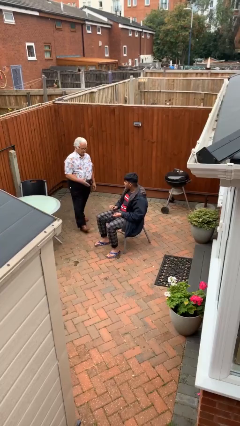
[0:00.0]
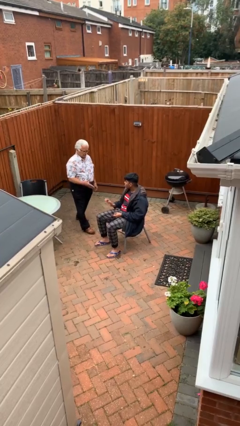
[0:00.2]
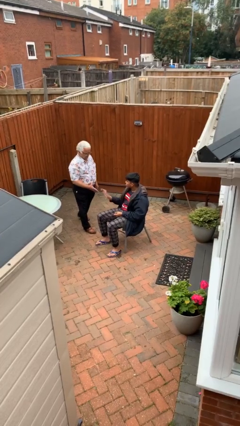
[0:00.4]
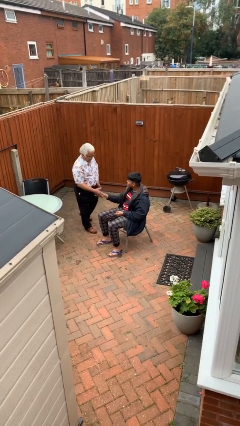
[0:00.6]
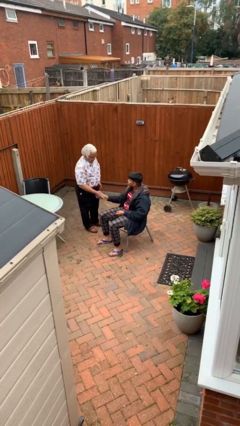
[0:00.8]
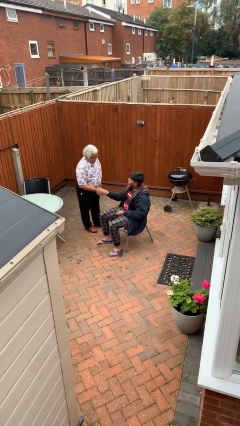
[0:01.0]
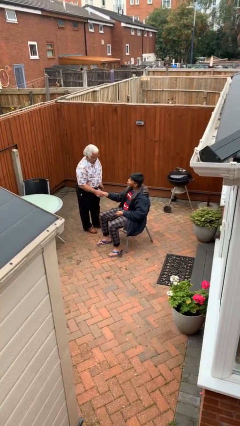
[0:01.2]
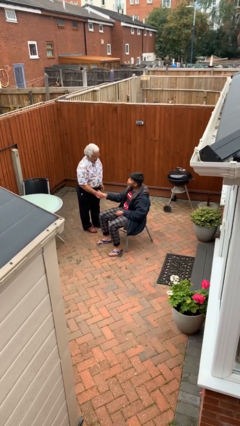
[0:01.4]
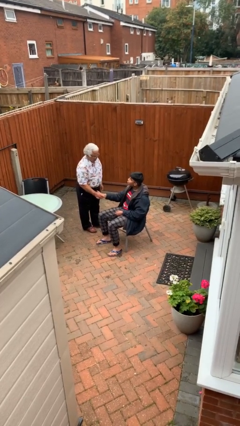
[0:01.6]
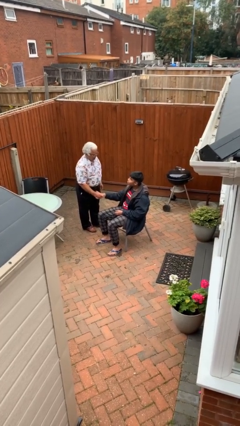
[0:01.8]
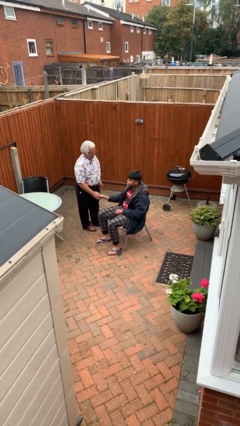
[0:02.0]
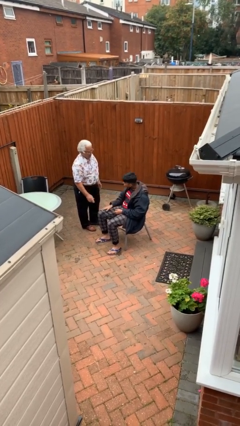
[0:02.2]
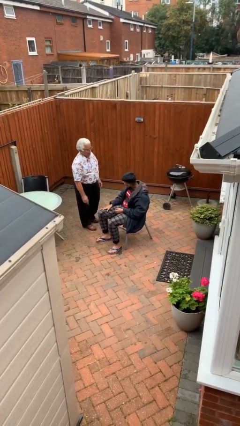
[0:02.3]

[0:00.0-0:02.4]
person shakes hand

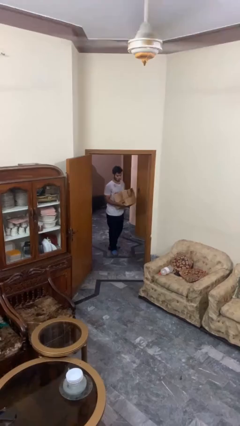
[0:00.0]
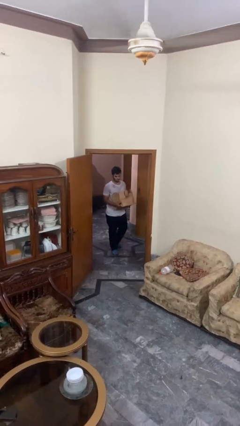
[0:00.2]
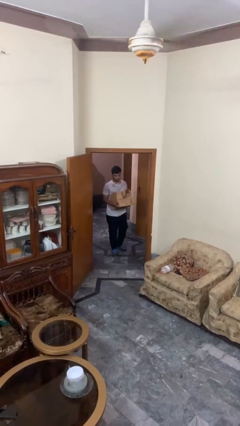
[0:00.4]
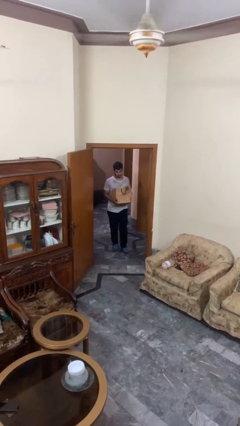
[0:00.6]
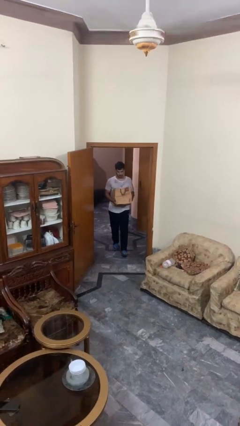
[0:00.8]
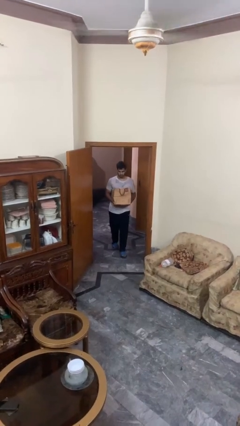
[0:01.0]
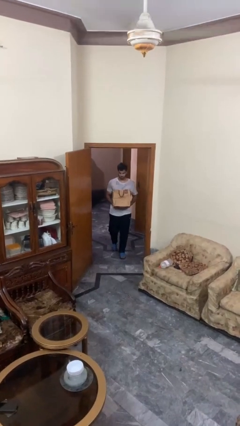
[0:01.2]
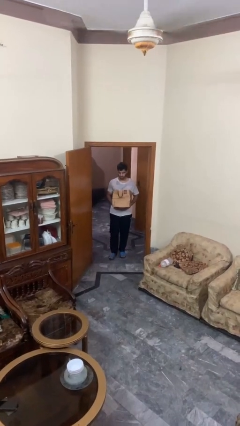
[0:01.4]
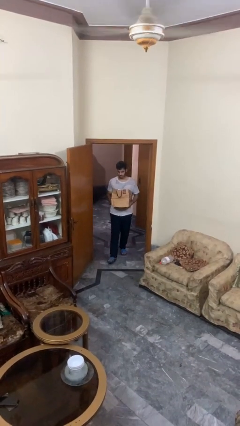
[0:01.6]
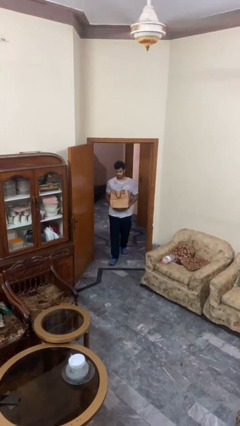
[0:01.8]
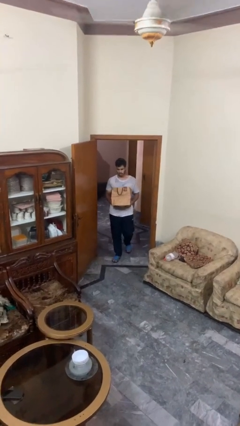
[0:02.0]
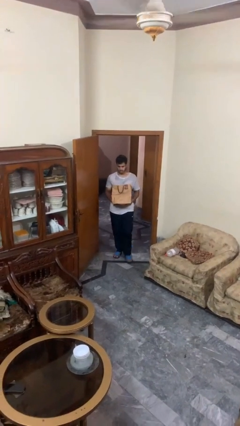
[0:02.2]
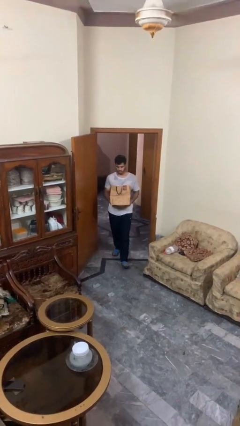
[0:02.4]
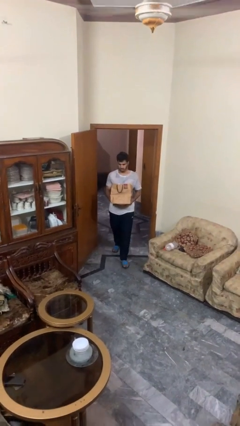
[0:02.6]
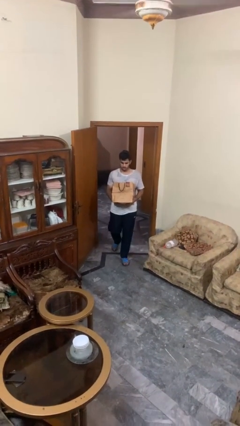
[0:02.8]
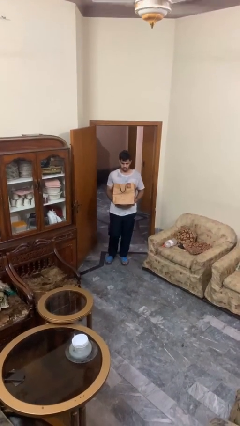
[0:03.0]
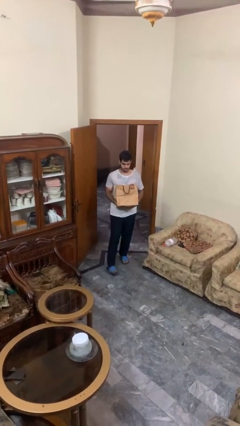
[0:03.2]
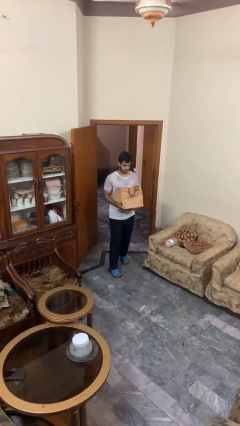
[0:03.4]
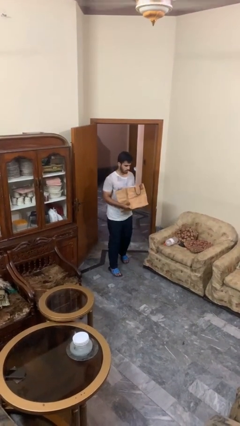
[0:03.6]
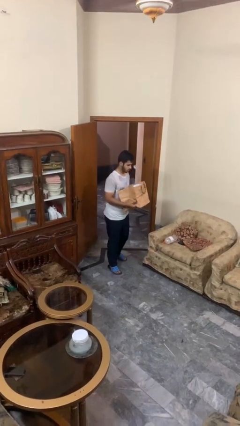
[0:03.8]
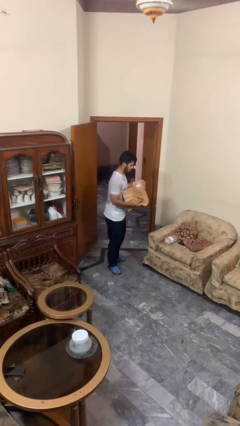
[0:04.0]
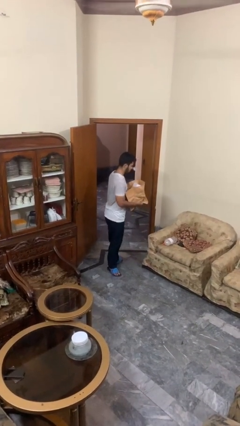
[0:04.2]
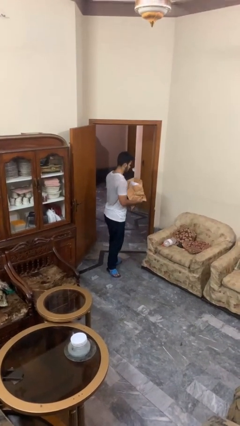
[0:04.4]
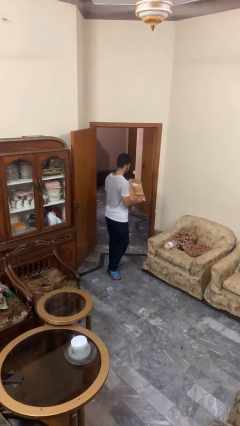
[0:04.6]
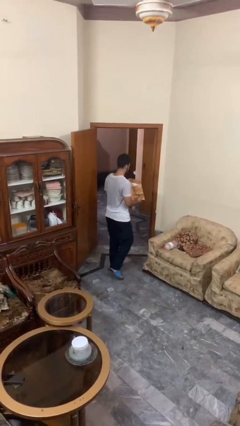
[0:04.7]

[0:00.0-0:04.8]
person carries groceries

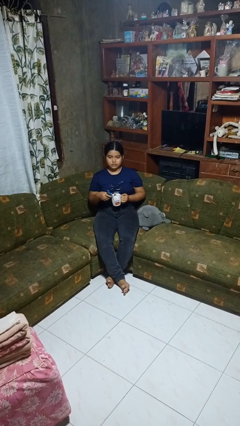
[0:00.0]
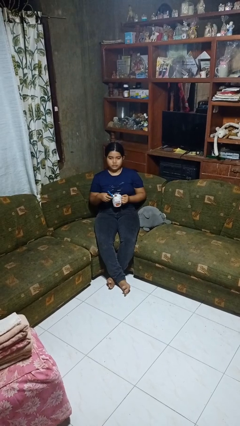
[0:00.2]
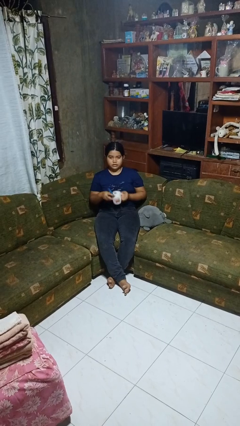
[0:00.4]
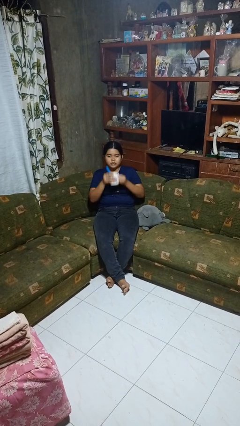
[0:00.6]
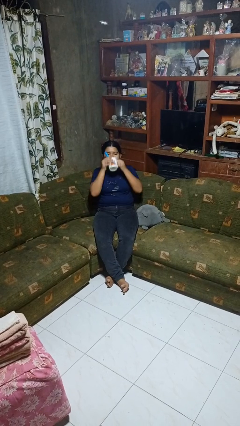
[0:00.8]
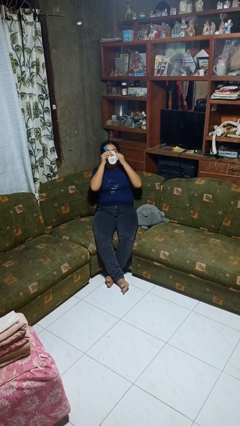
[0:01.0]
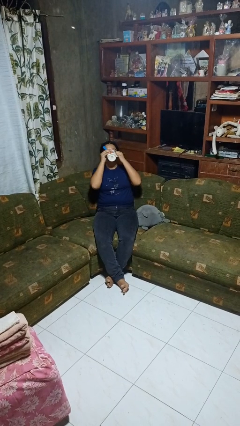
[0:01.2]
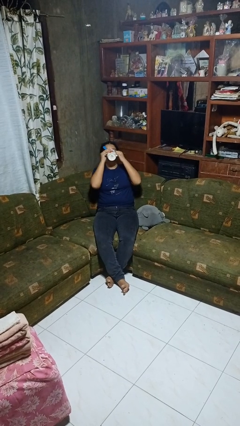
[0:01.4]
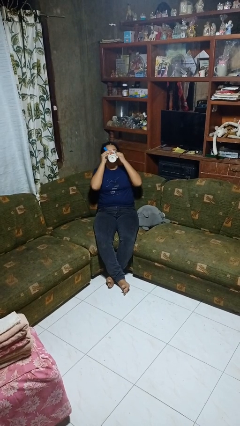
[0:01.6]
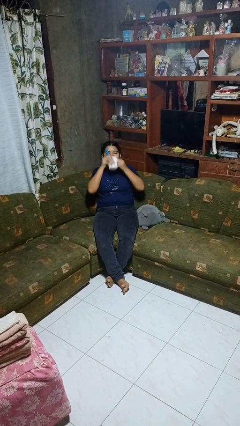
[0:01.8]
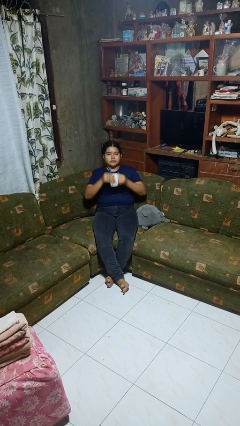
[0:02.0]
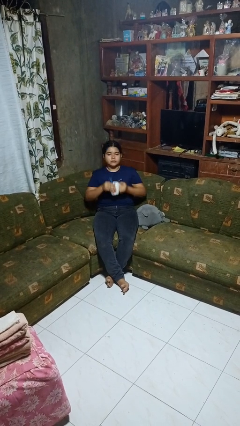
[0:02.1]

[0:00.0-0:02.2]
person drinks from mug

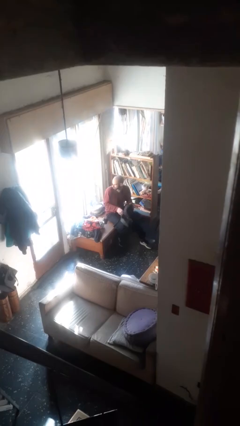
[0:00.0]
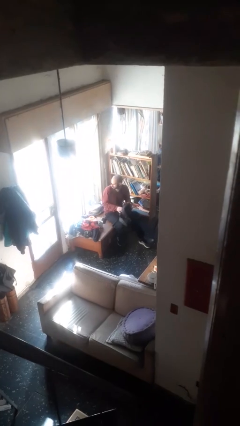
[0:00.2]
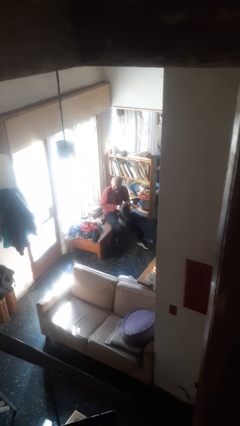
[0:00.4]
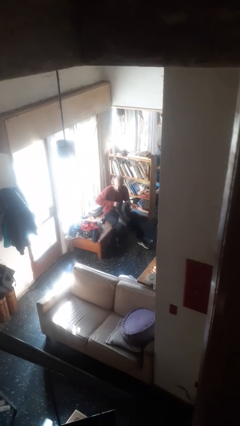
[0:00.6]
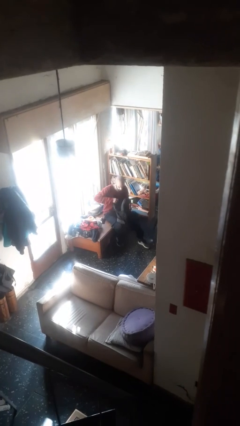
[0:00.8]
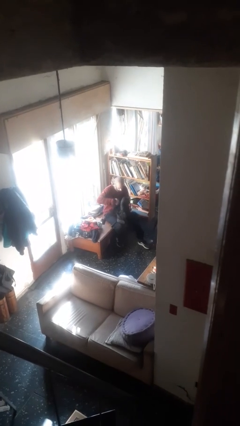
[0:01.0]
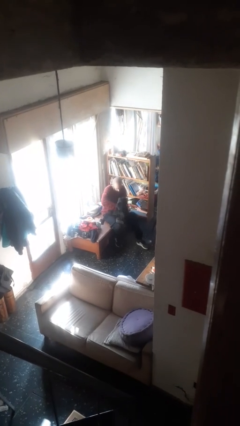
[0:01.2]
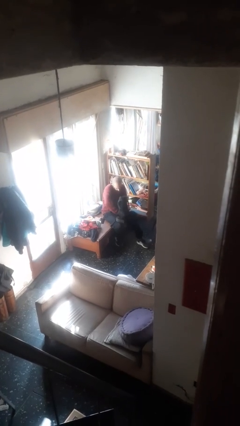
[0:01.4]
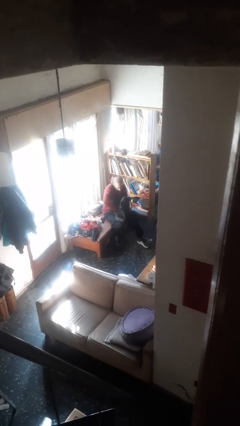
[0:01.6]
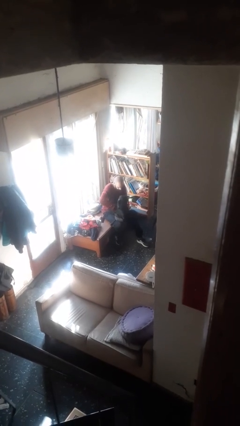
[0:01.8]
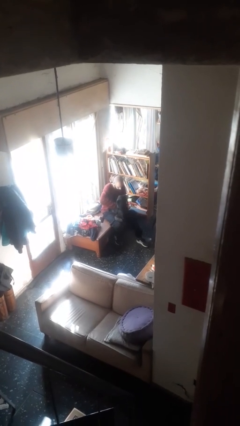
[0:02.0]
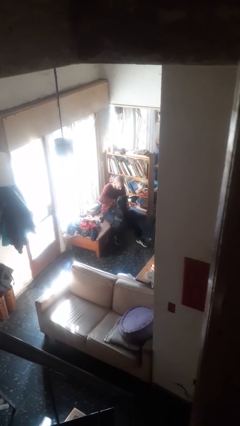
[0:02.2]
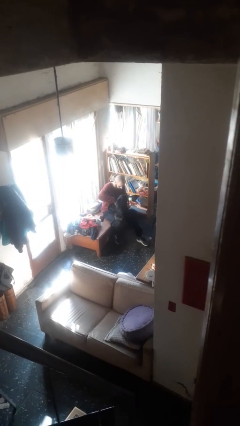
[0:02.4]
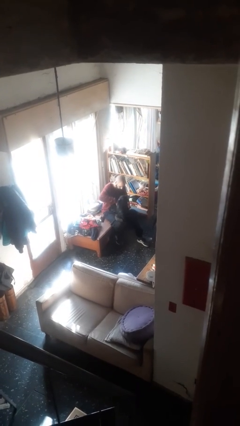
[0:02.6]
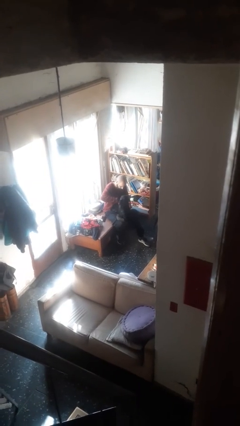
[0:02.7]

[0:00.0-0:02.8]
person searches in backpack

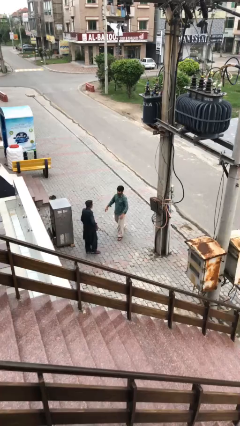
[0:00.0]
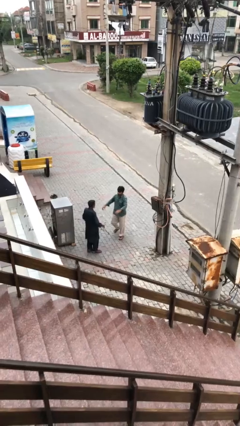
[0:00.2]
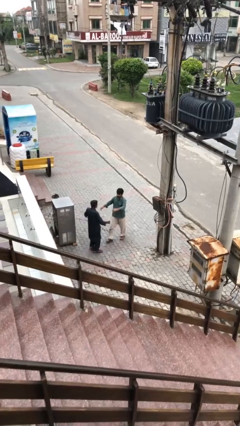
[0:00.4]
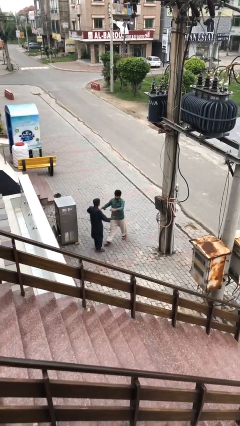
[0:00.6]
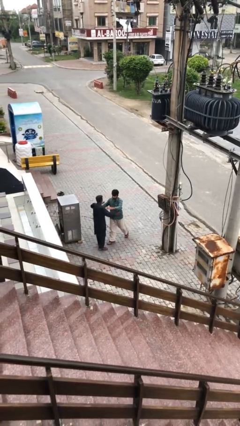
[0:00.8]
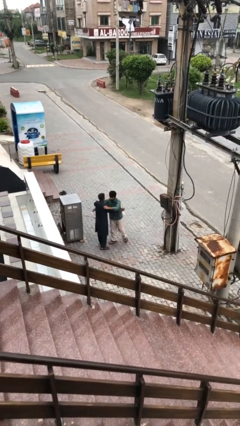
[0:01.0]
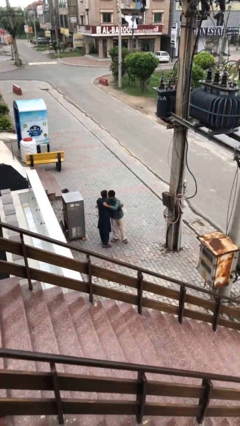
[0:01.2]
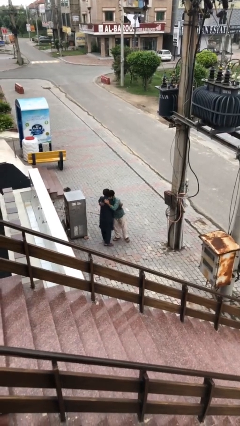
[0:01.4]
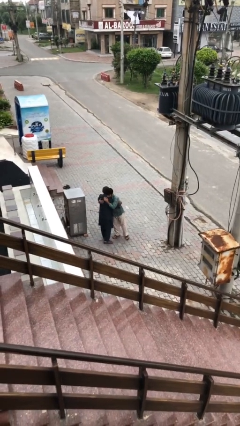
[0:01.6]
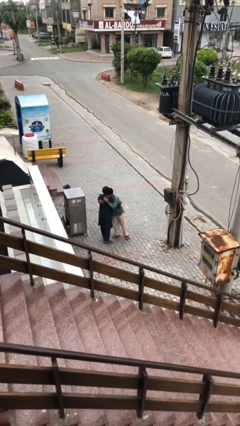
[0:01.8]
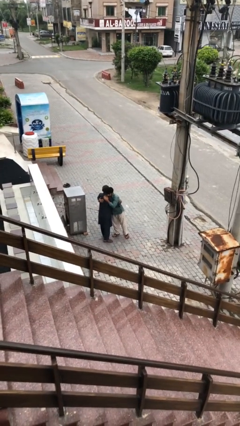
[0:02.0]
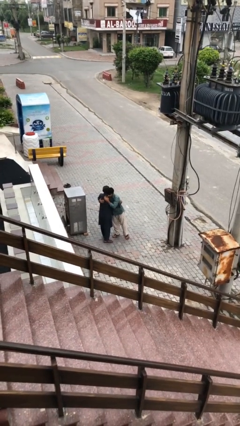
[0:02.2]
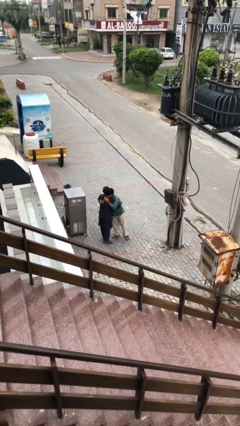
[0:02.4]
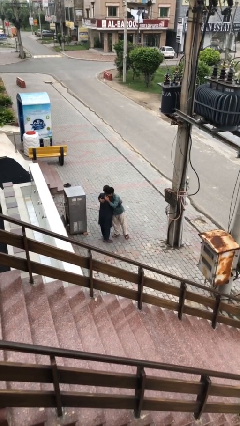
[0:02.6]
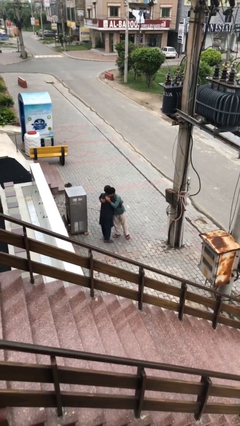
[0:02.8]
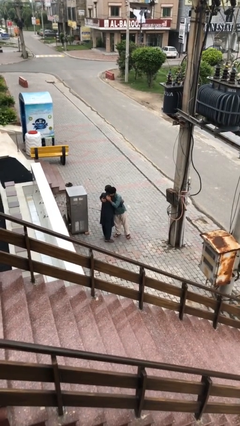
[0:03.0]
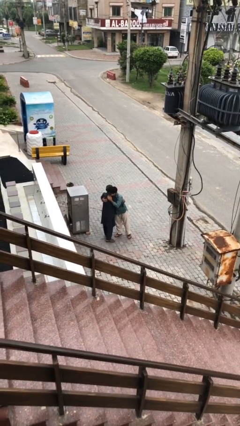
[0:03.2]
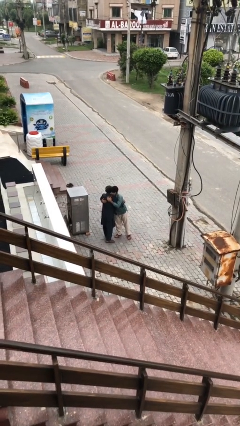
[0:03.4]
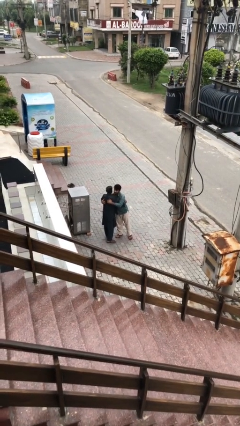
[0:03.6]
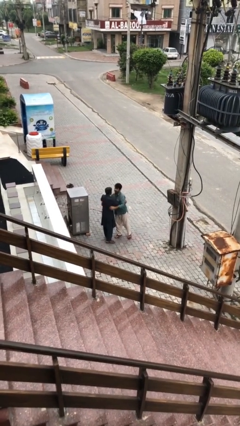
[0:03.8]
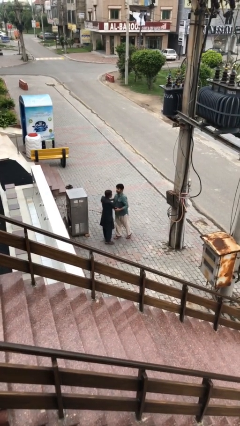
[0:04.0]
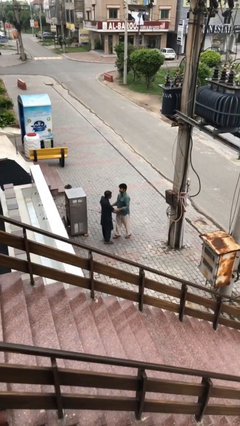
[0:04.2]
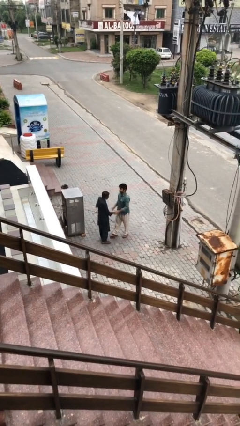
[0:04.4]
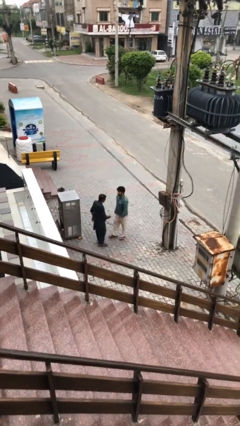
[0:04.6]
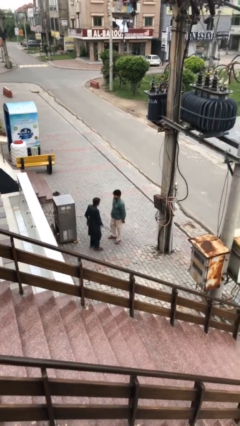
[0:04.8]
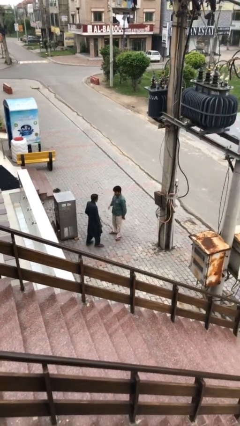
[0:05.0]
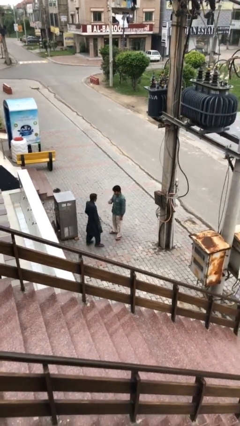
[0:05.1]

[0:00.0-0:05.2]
person embraces person
